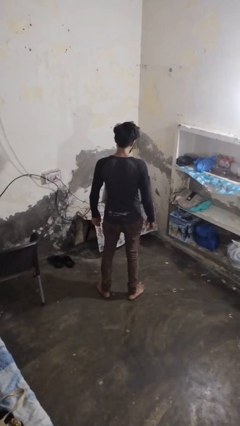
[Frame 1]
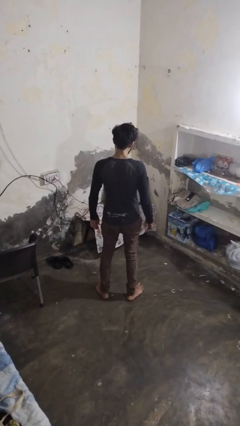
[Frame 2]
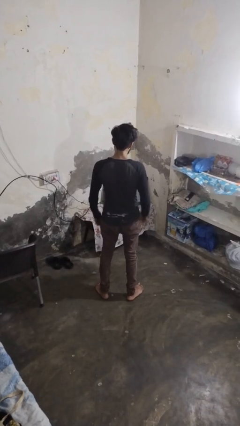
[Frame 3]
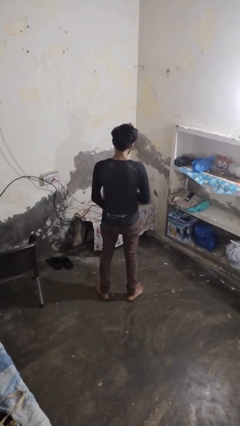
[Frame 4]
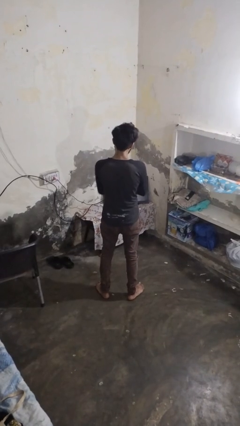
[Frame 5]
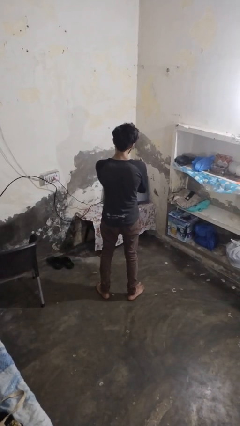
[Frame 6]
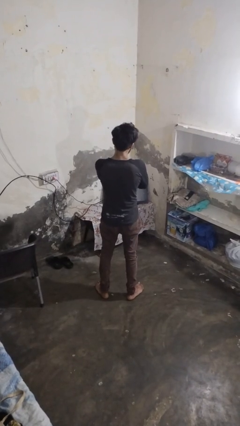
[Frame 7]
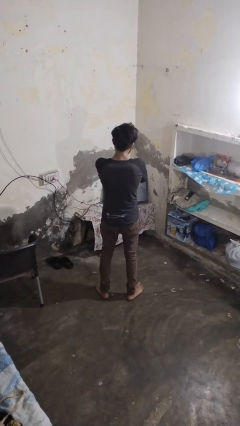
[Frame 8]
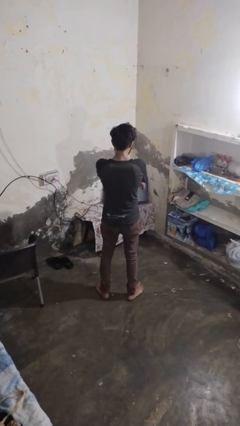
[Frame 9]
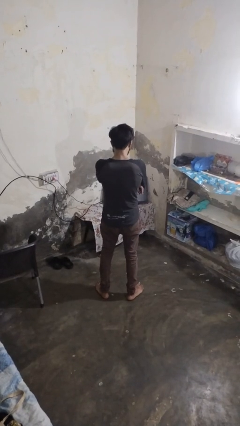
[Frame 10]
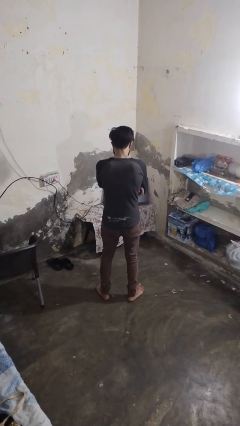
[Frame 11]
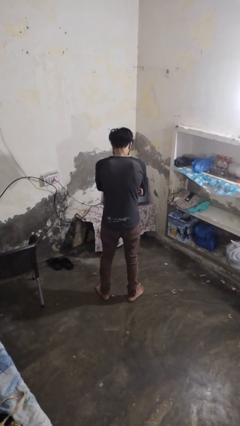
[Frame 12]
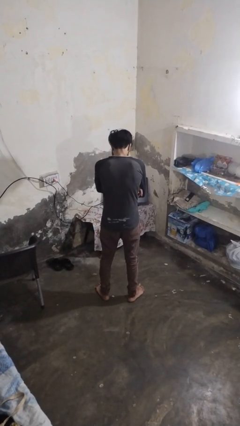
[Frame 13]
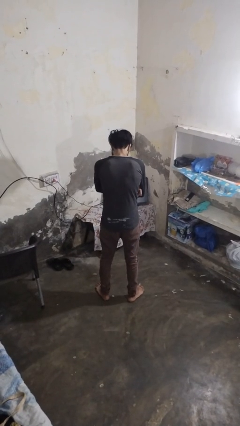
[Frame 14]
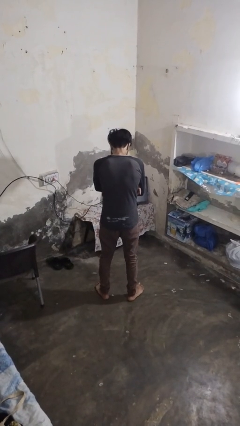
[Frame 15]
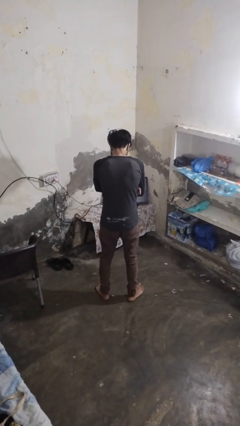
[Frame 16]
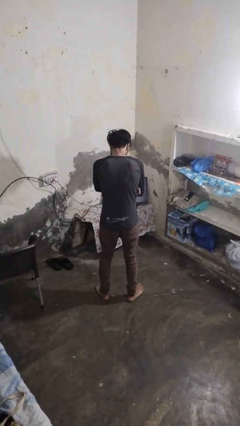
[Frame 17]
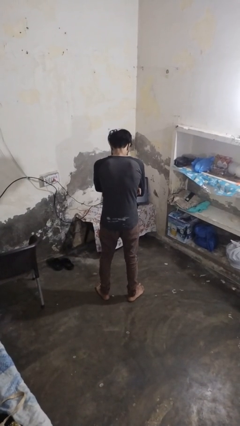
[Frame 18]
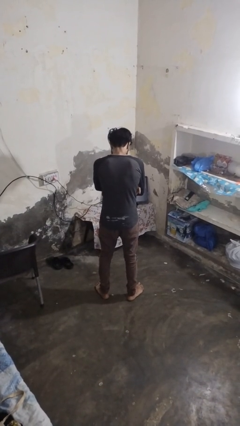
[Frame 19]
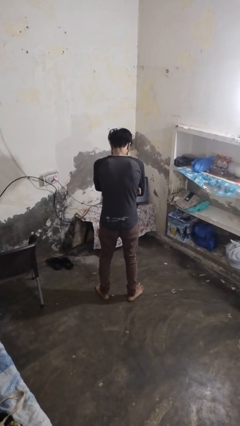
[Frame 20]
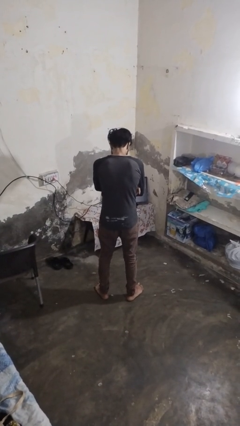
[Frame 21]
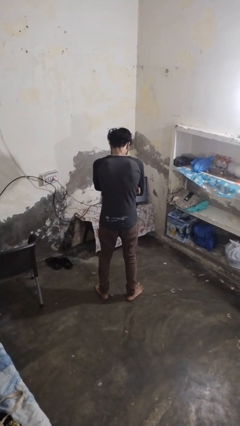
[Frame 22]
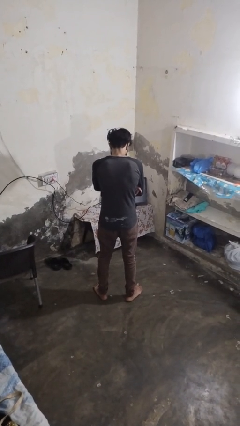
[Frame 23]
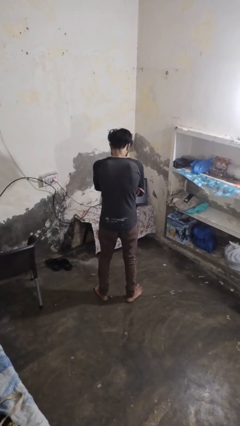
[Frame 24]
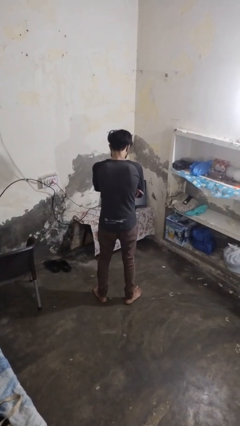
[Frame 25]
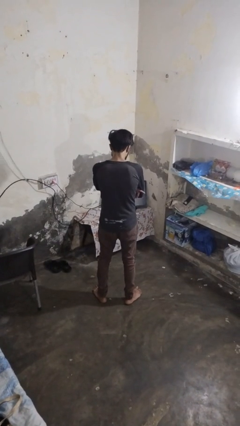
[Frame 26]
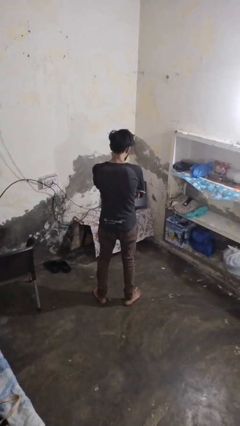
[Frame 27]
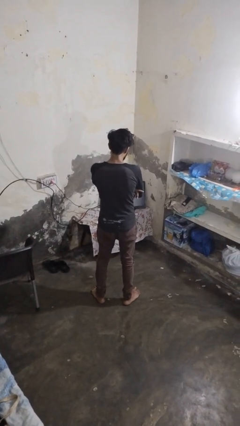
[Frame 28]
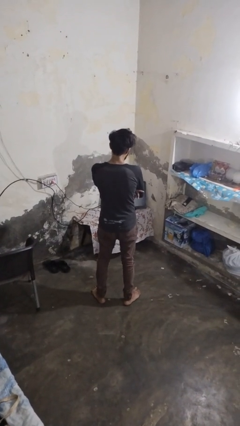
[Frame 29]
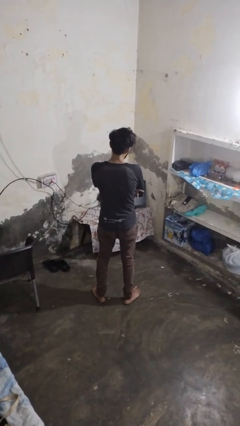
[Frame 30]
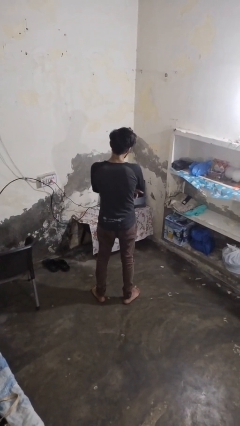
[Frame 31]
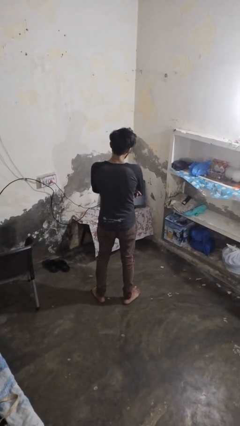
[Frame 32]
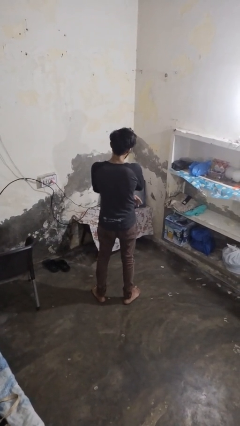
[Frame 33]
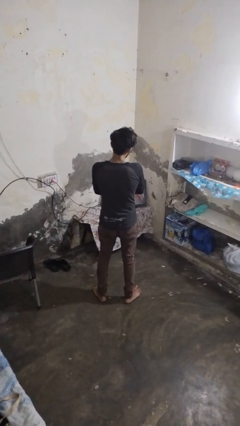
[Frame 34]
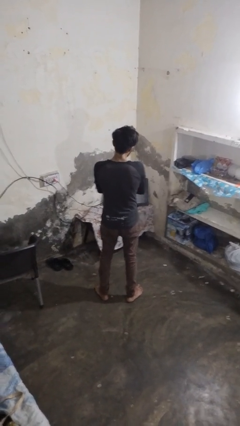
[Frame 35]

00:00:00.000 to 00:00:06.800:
person crosses arms

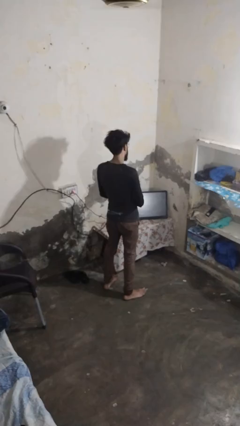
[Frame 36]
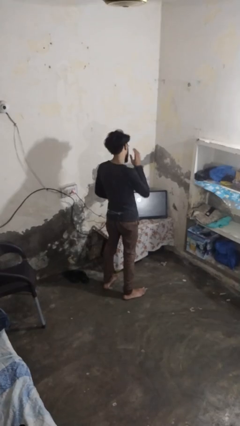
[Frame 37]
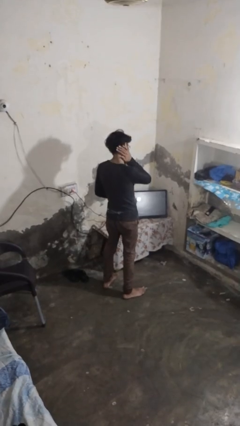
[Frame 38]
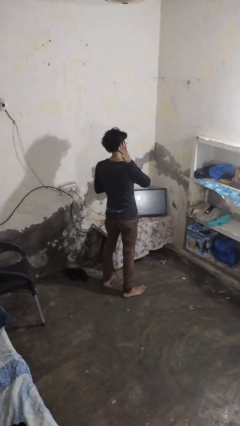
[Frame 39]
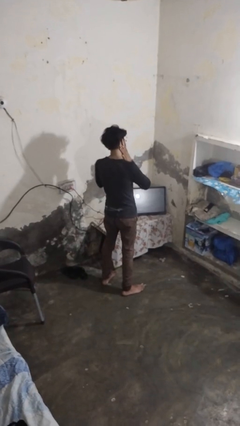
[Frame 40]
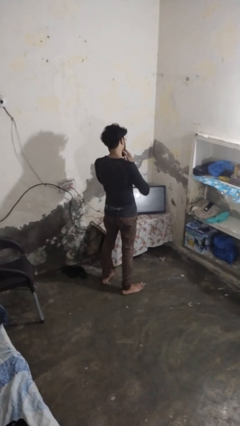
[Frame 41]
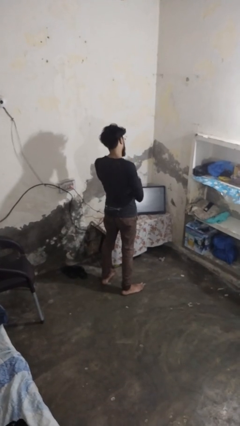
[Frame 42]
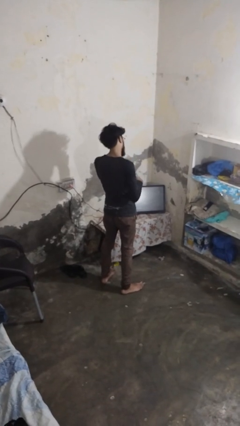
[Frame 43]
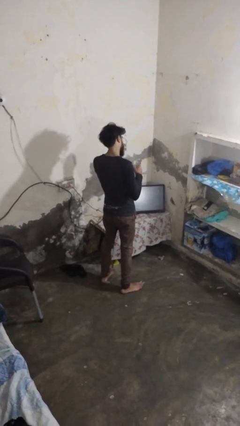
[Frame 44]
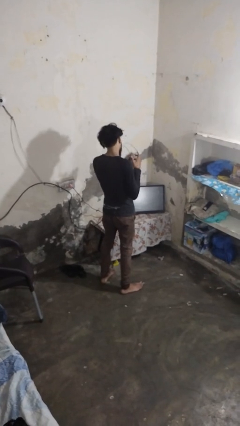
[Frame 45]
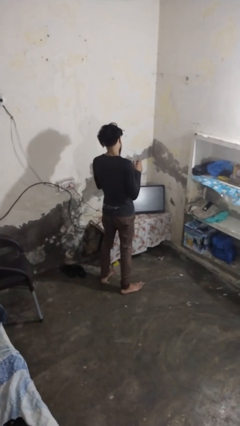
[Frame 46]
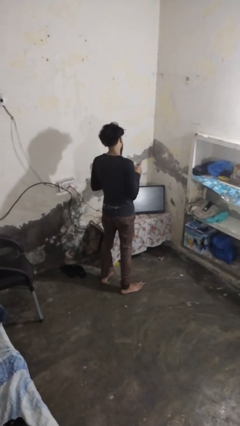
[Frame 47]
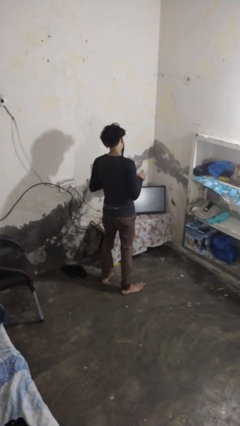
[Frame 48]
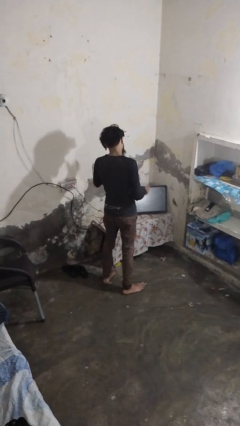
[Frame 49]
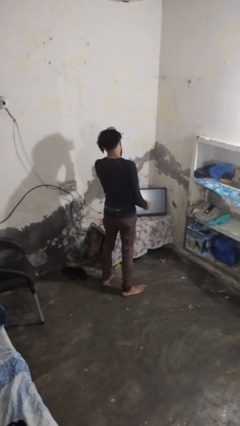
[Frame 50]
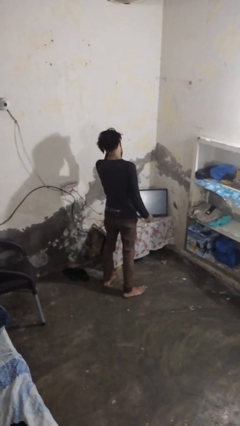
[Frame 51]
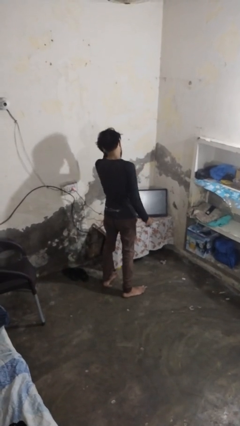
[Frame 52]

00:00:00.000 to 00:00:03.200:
person takes off glasses

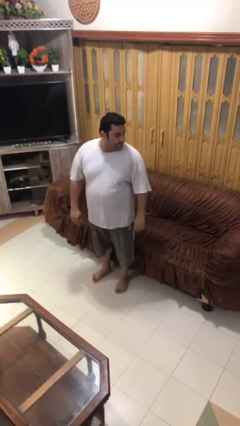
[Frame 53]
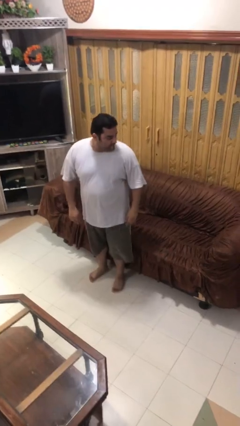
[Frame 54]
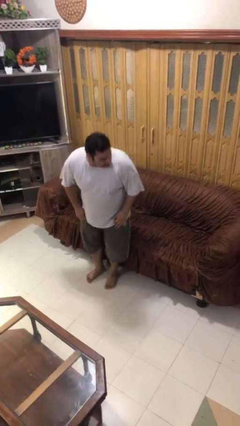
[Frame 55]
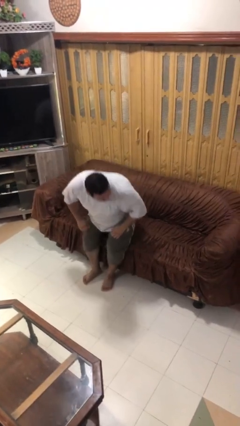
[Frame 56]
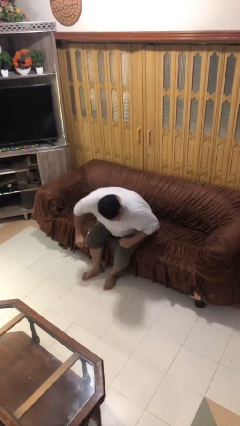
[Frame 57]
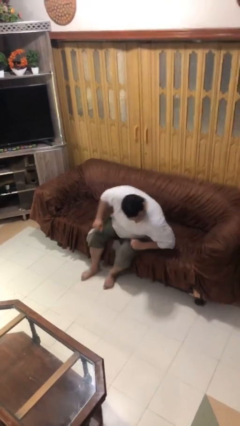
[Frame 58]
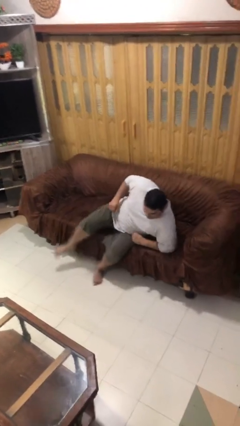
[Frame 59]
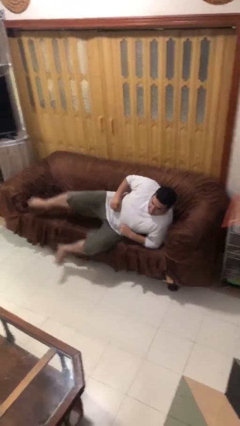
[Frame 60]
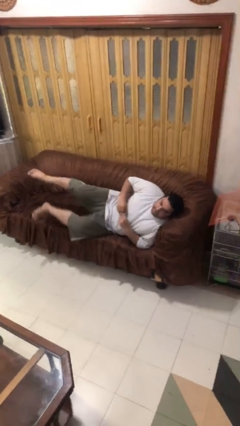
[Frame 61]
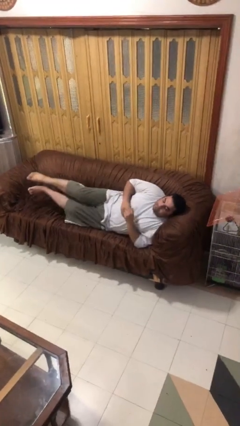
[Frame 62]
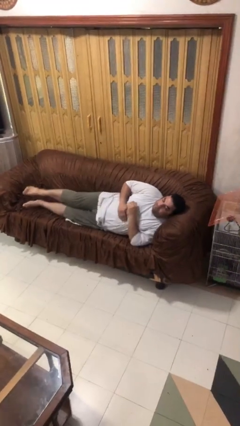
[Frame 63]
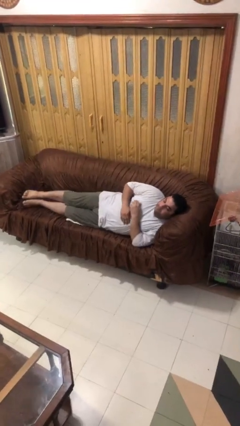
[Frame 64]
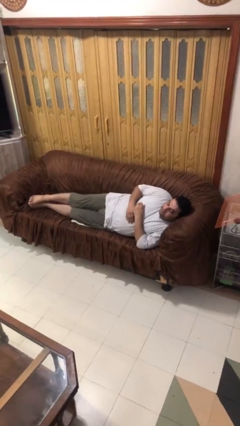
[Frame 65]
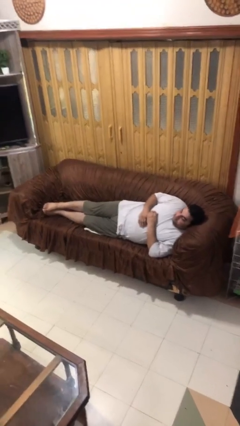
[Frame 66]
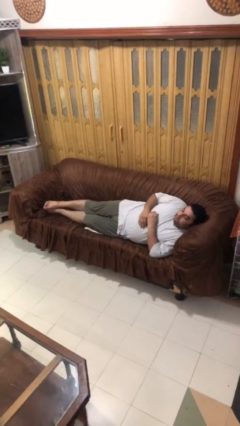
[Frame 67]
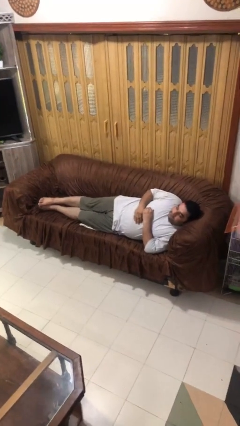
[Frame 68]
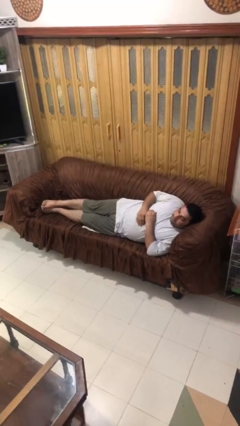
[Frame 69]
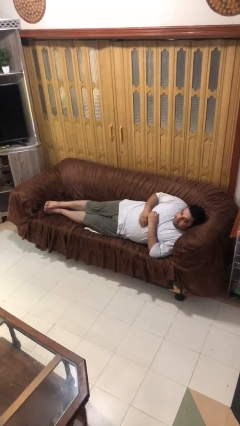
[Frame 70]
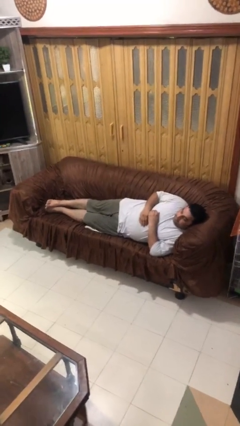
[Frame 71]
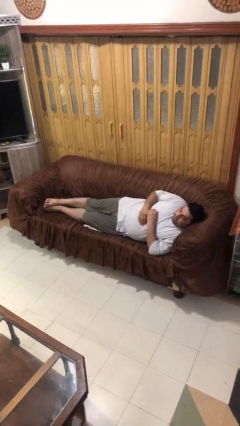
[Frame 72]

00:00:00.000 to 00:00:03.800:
person lies down on couch

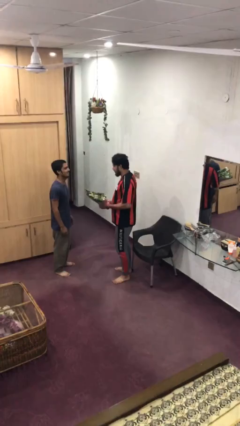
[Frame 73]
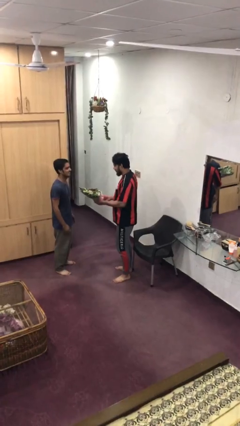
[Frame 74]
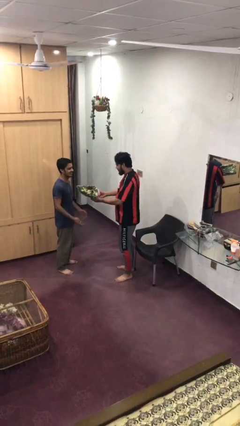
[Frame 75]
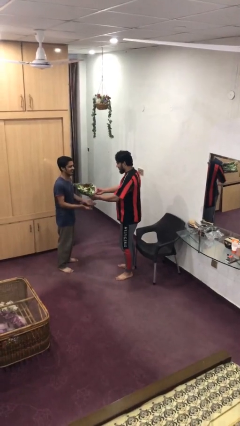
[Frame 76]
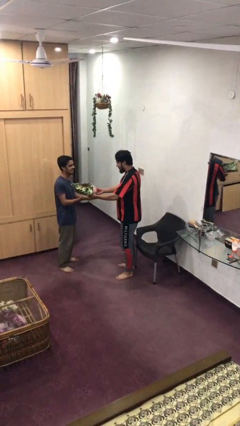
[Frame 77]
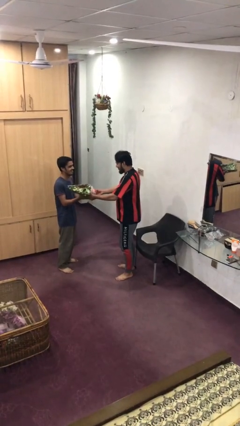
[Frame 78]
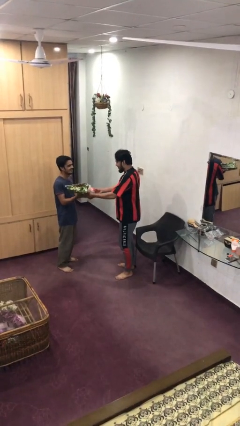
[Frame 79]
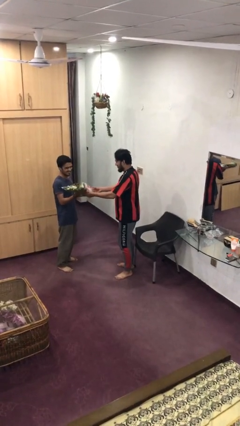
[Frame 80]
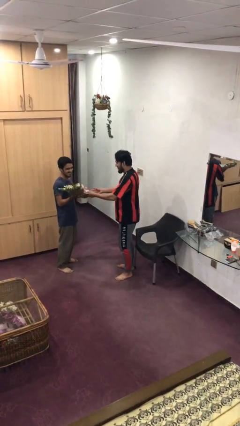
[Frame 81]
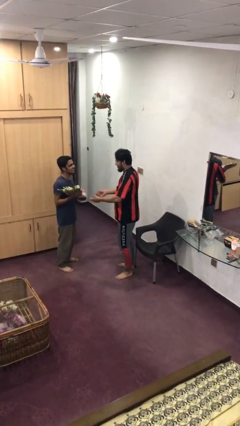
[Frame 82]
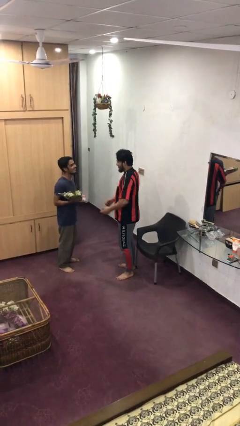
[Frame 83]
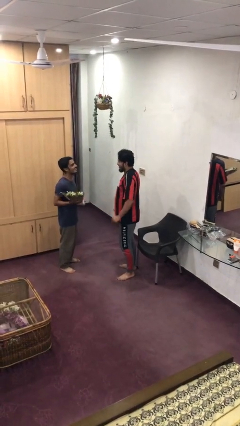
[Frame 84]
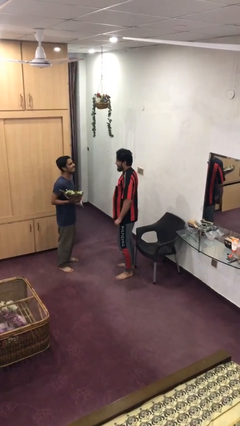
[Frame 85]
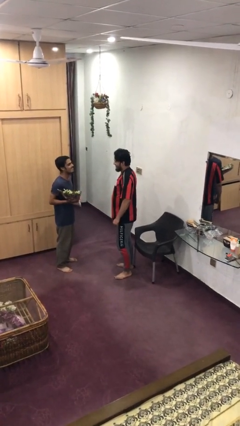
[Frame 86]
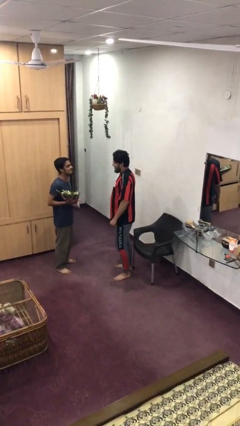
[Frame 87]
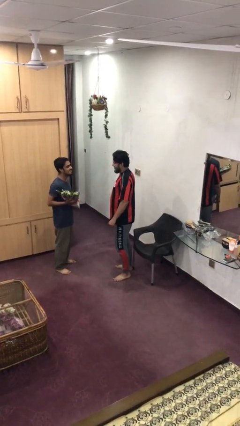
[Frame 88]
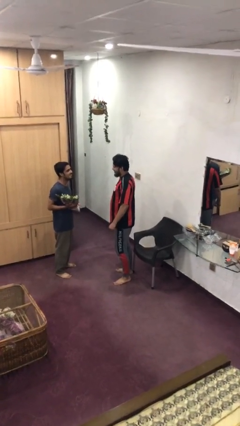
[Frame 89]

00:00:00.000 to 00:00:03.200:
person transfers object to person

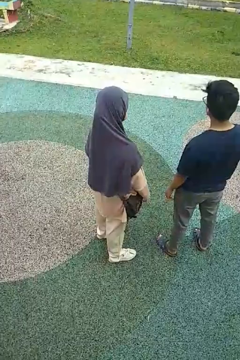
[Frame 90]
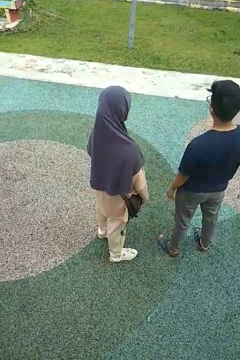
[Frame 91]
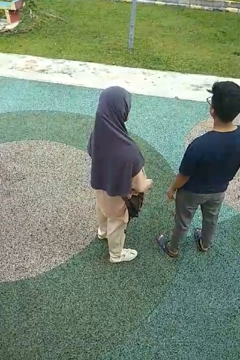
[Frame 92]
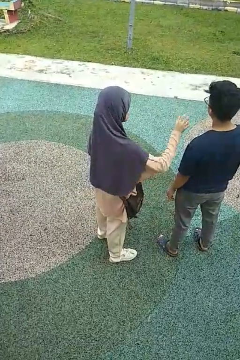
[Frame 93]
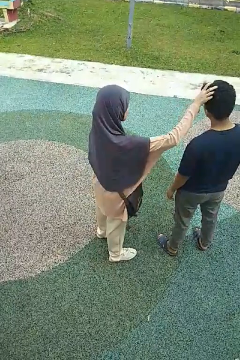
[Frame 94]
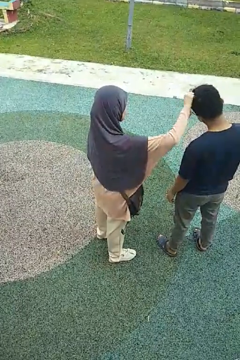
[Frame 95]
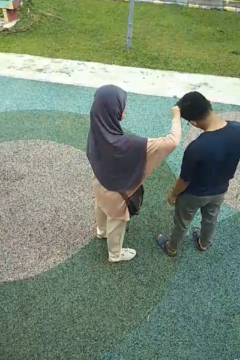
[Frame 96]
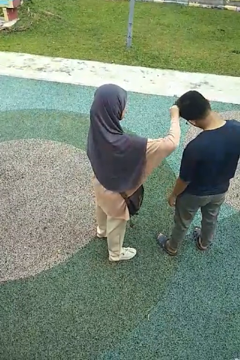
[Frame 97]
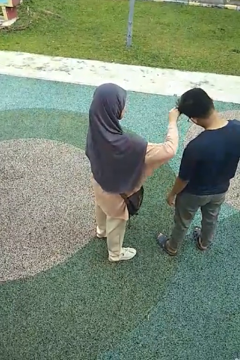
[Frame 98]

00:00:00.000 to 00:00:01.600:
person grabs person by hair
